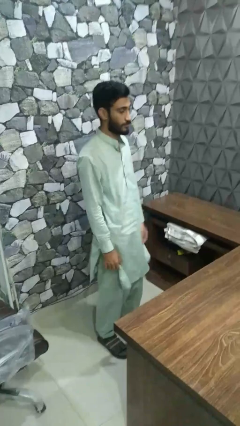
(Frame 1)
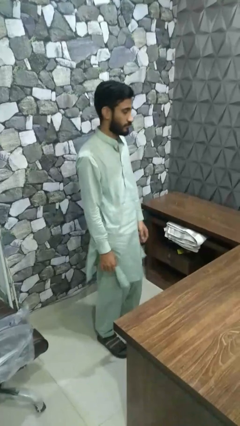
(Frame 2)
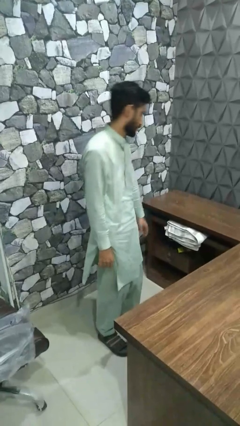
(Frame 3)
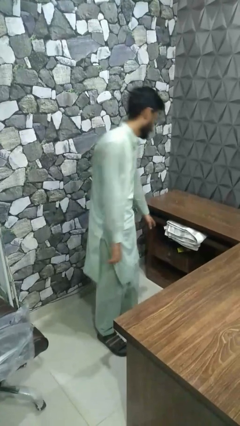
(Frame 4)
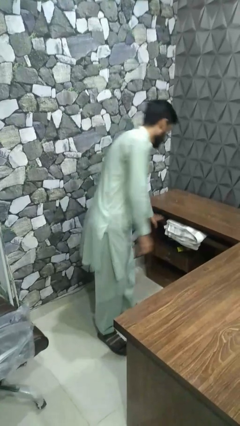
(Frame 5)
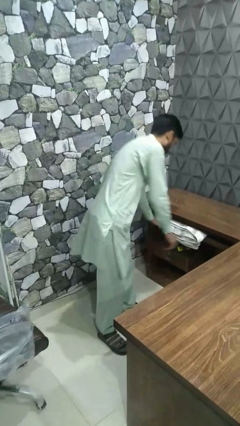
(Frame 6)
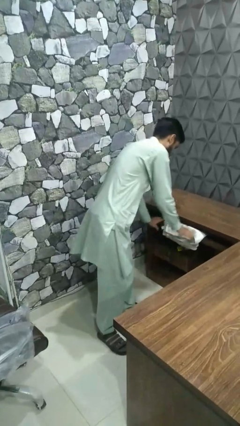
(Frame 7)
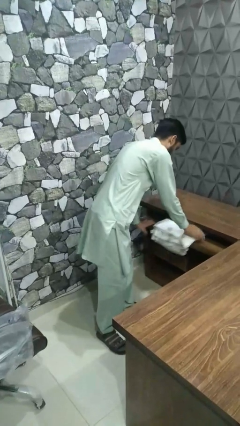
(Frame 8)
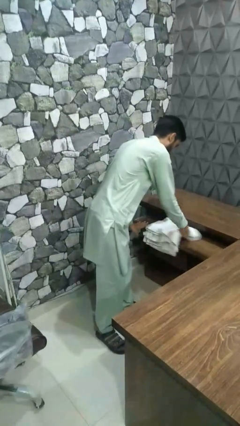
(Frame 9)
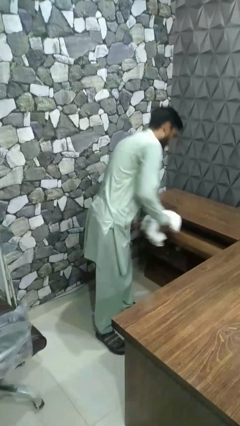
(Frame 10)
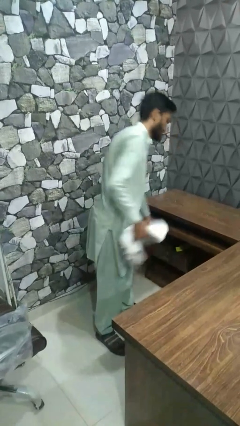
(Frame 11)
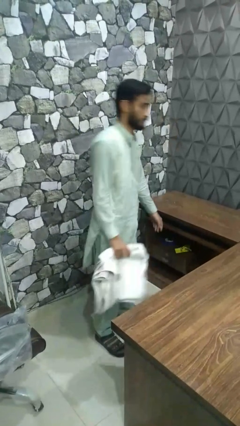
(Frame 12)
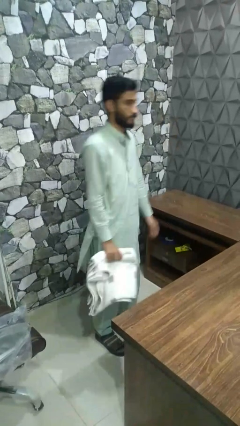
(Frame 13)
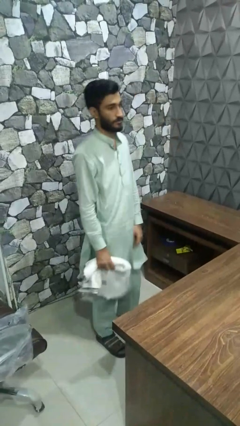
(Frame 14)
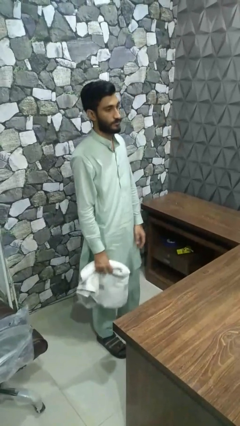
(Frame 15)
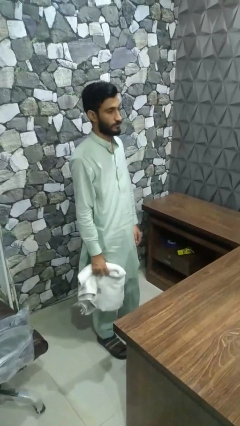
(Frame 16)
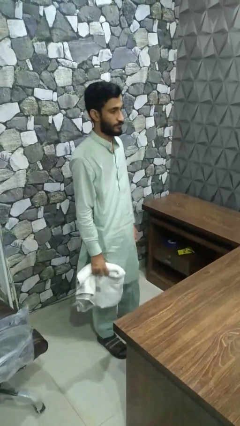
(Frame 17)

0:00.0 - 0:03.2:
person takes clothes from dresser

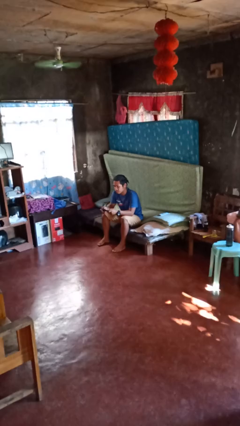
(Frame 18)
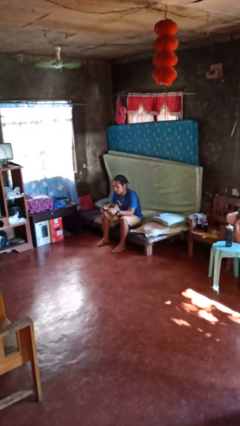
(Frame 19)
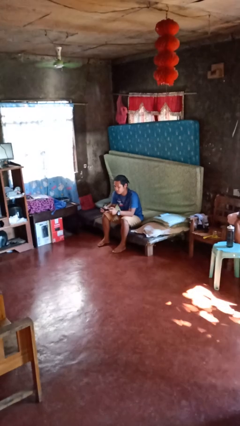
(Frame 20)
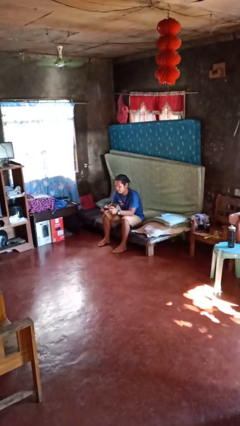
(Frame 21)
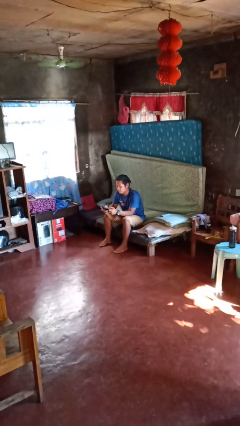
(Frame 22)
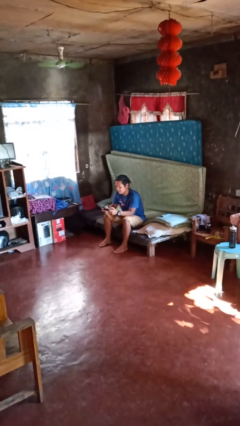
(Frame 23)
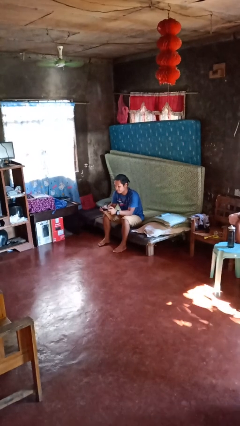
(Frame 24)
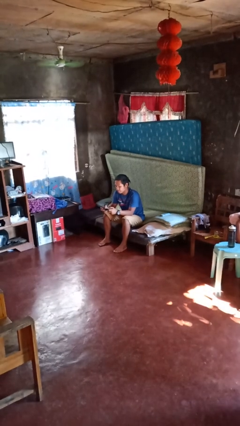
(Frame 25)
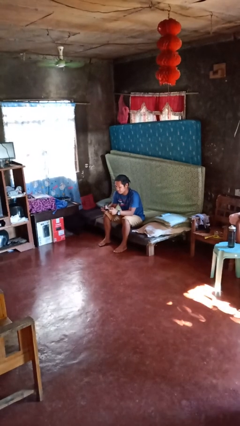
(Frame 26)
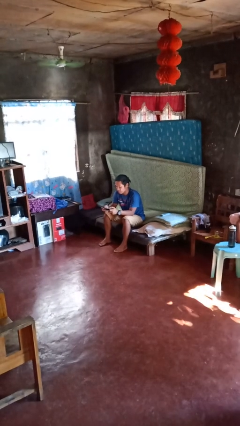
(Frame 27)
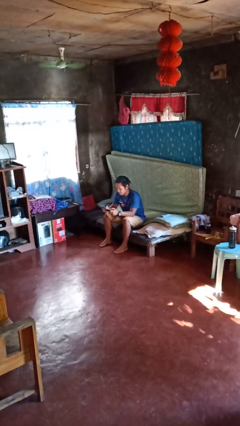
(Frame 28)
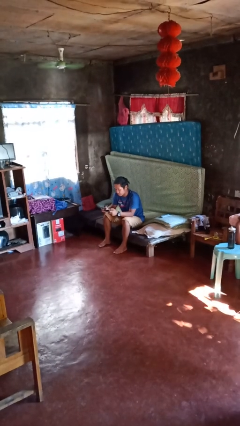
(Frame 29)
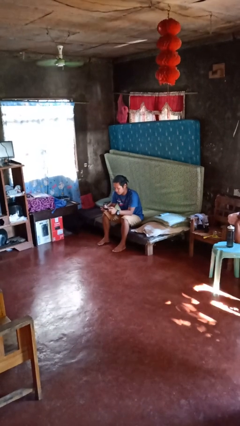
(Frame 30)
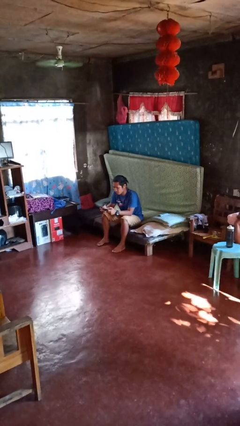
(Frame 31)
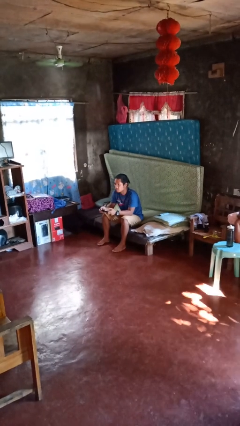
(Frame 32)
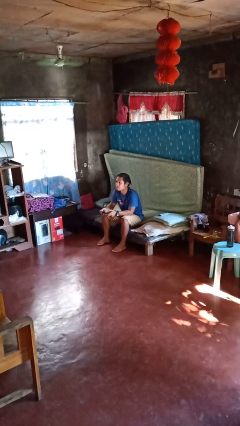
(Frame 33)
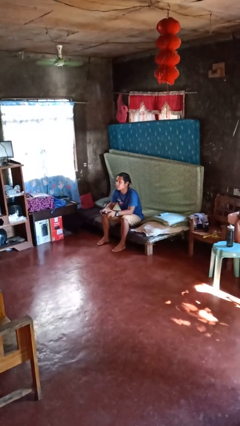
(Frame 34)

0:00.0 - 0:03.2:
person interacts with handheld game

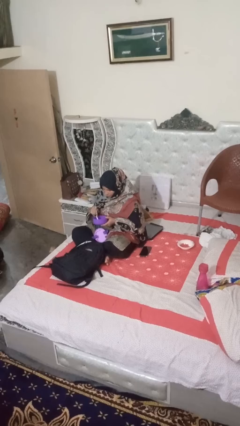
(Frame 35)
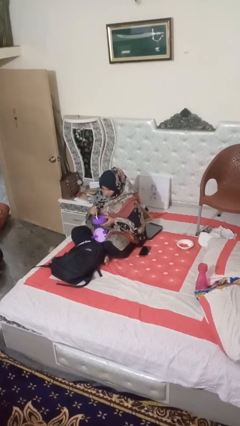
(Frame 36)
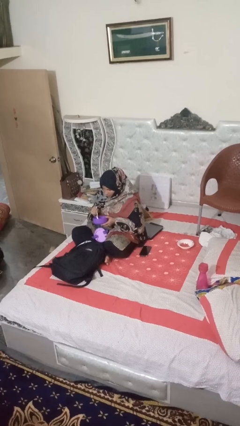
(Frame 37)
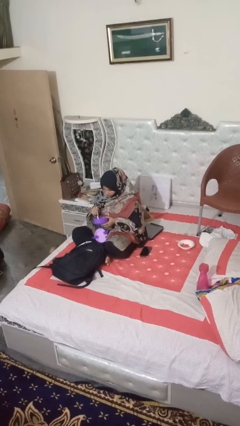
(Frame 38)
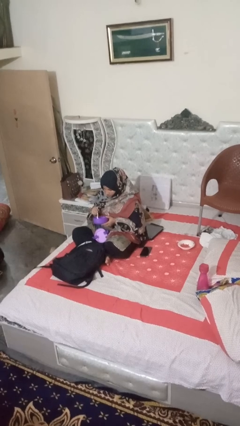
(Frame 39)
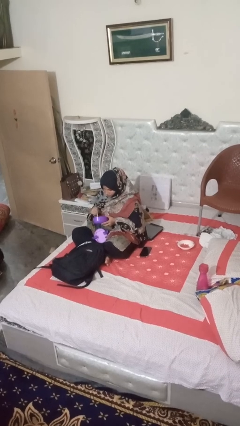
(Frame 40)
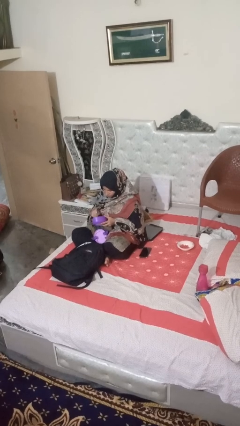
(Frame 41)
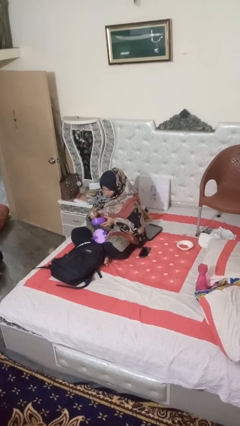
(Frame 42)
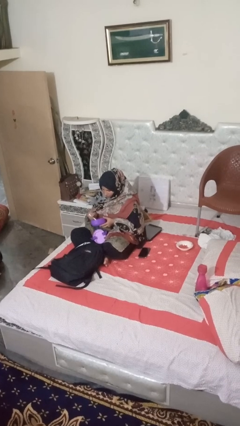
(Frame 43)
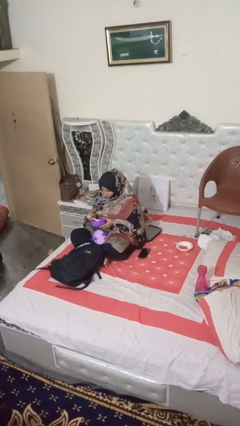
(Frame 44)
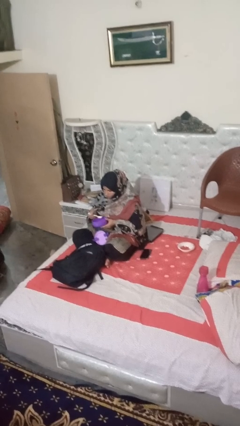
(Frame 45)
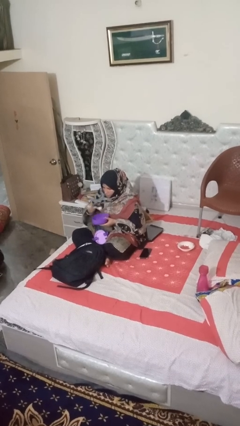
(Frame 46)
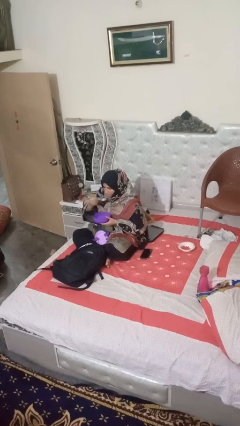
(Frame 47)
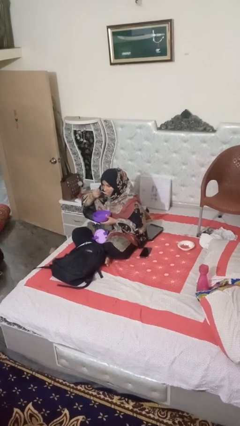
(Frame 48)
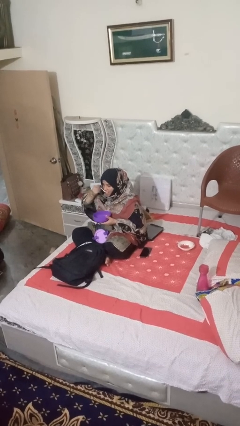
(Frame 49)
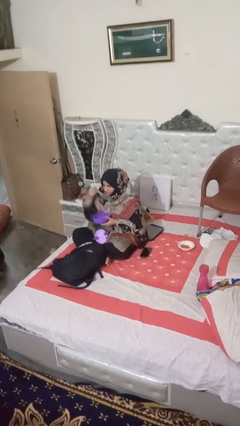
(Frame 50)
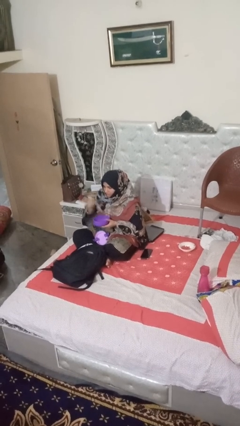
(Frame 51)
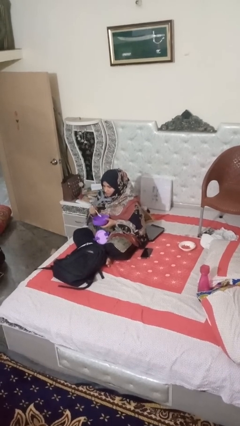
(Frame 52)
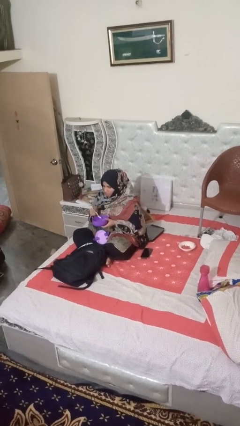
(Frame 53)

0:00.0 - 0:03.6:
person eats snack from bag

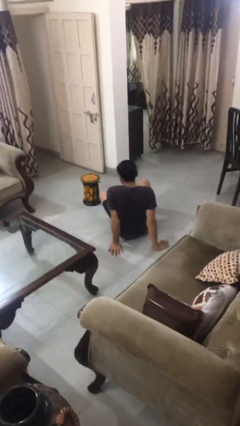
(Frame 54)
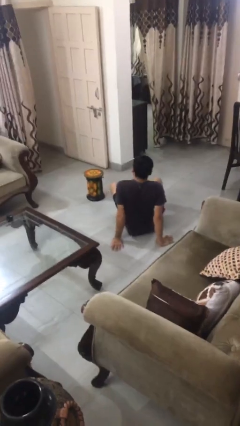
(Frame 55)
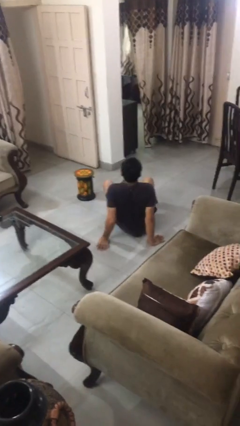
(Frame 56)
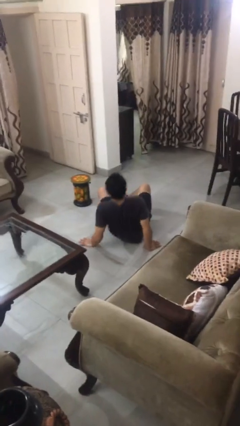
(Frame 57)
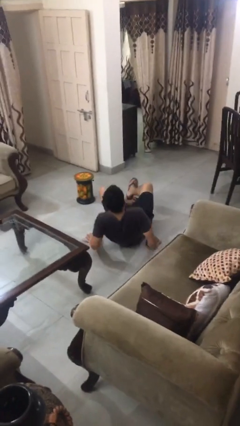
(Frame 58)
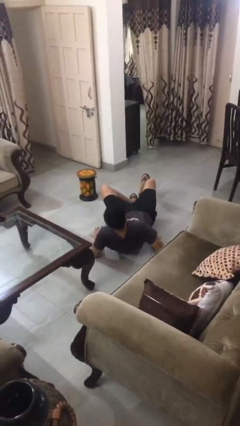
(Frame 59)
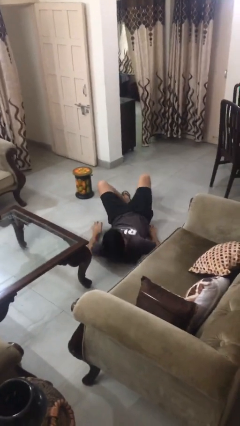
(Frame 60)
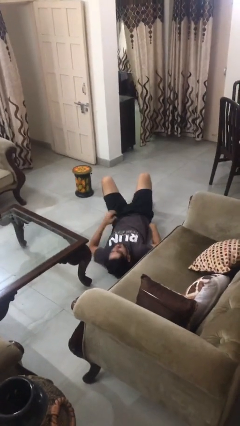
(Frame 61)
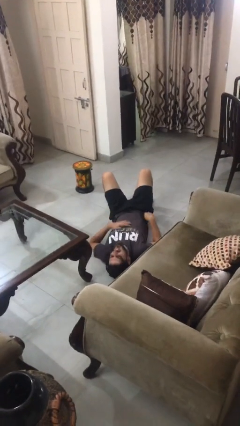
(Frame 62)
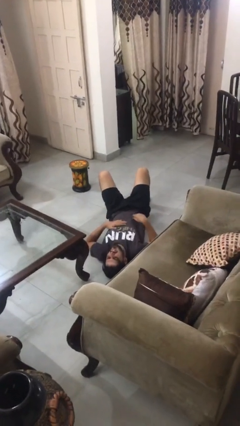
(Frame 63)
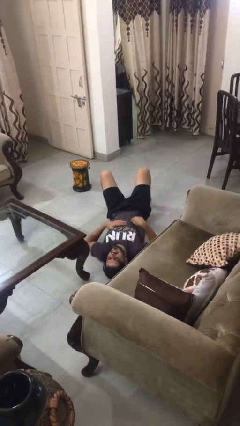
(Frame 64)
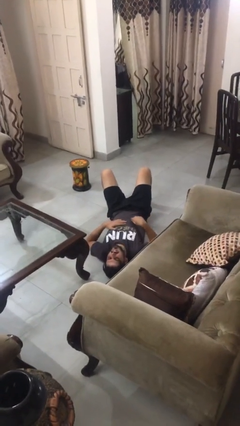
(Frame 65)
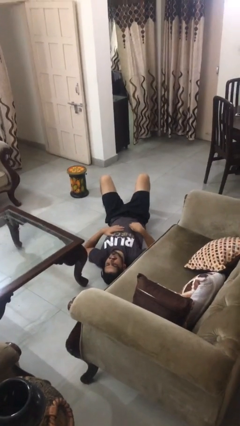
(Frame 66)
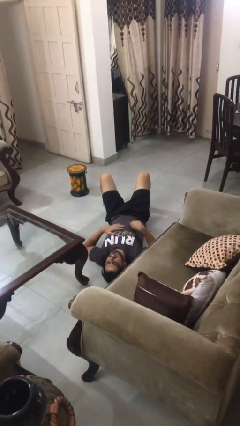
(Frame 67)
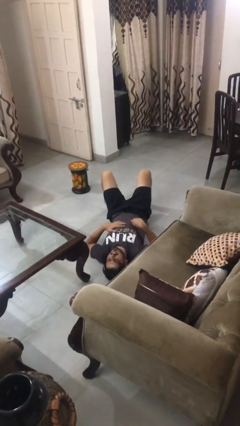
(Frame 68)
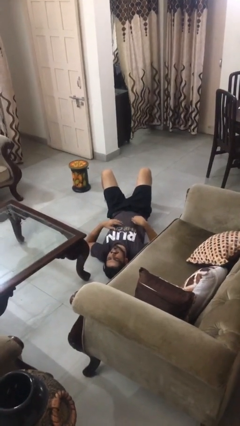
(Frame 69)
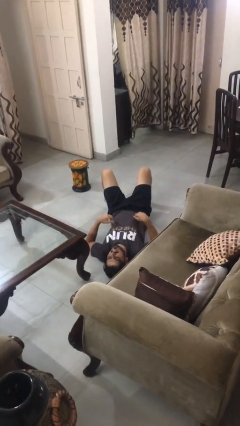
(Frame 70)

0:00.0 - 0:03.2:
person lies down on floor

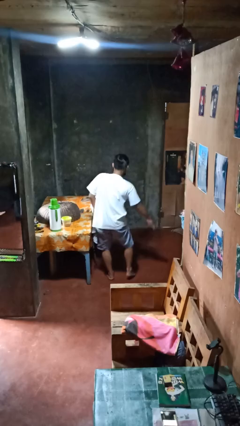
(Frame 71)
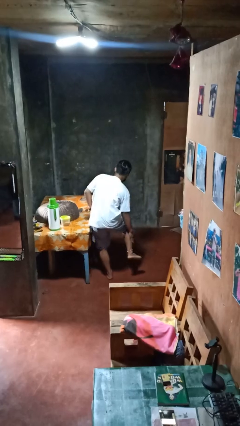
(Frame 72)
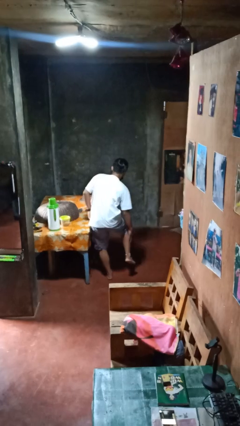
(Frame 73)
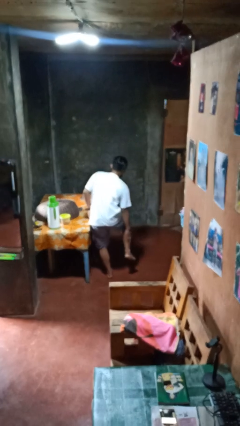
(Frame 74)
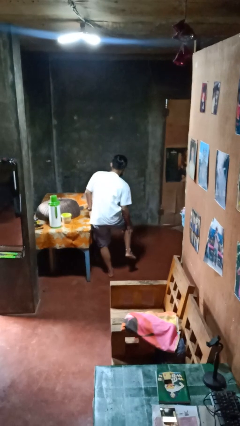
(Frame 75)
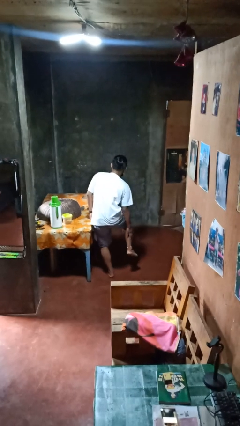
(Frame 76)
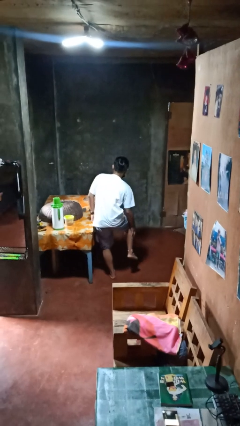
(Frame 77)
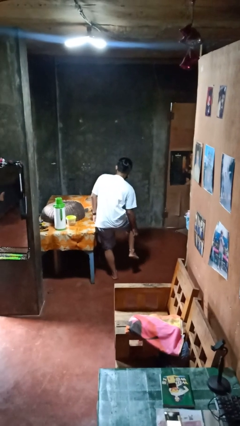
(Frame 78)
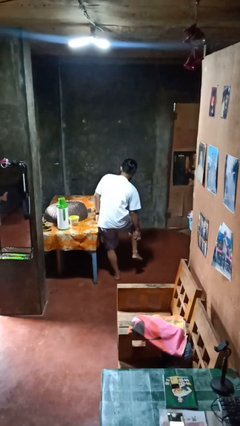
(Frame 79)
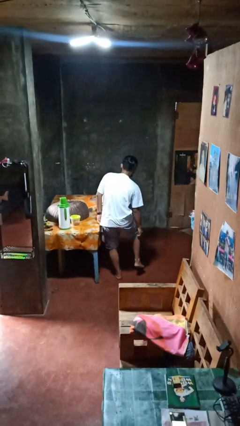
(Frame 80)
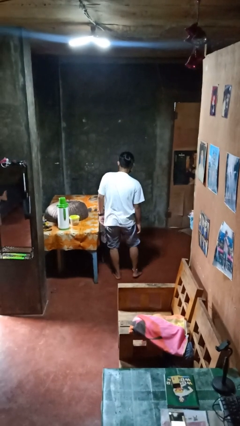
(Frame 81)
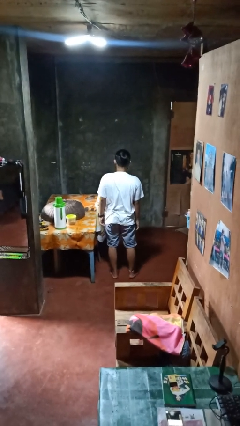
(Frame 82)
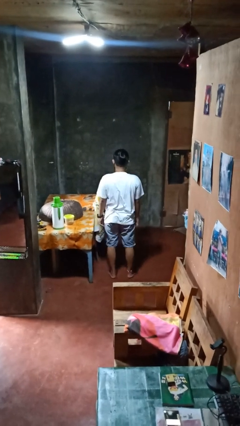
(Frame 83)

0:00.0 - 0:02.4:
person swats bug

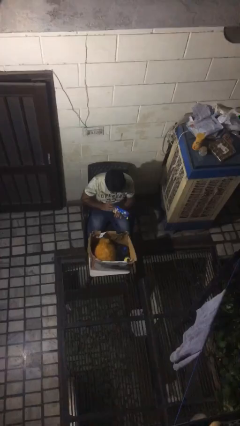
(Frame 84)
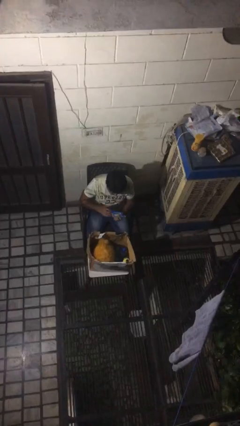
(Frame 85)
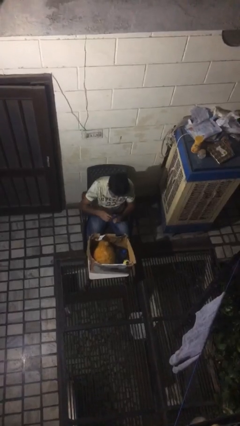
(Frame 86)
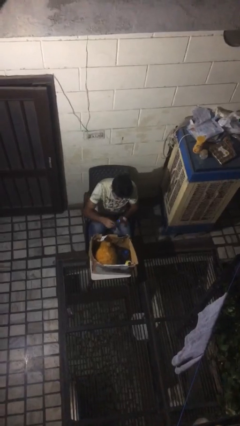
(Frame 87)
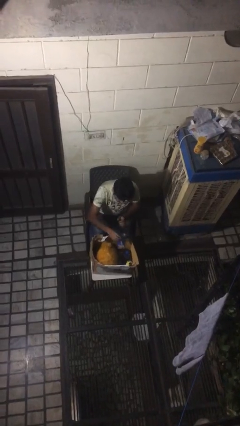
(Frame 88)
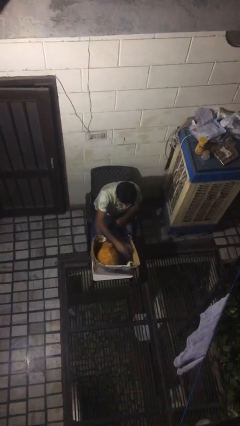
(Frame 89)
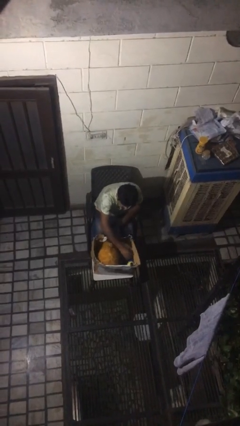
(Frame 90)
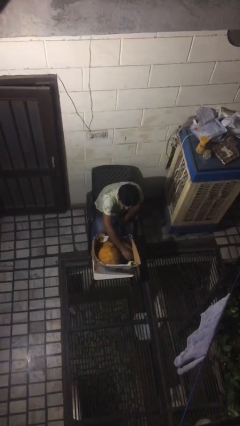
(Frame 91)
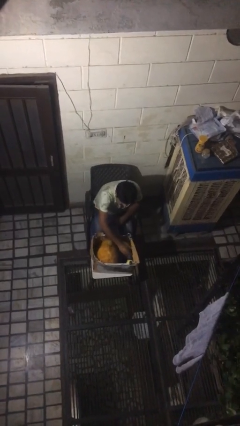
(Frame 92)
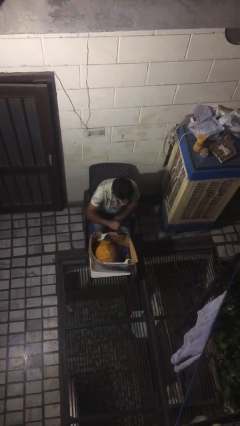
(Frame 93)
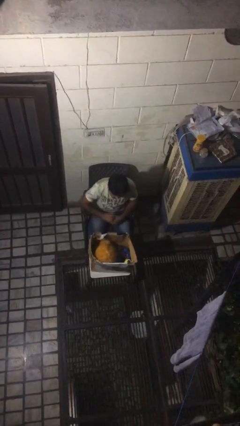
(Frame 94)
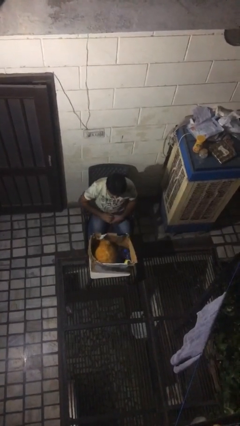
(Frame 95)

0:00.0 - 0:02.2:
person puts object into box
